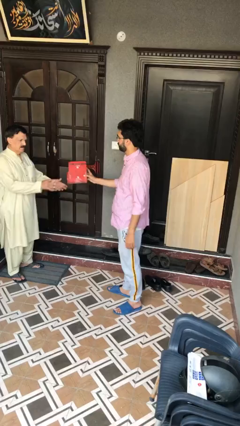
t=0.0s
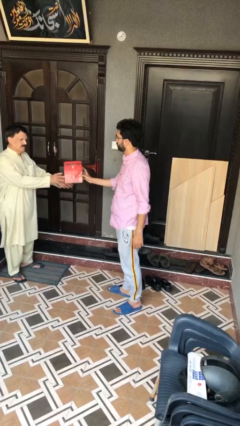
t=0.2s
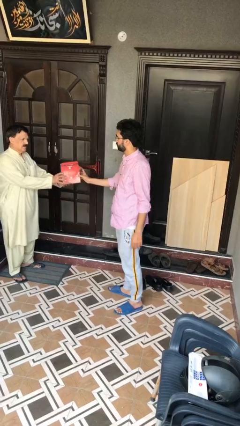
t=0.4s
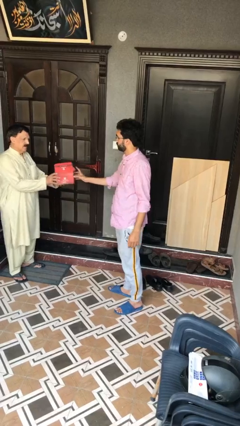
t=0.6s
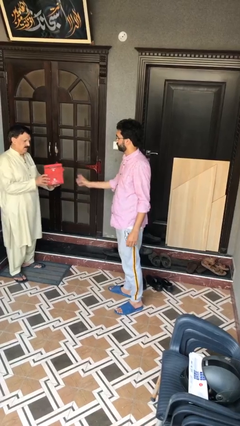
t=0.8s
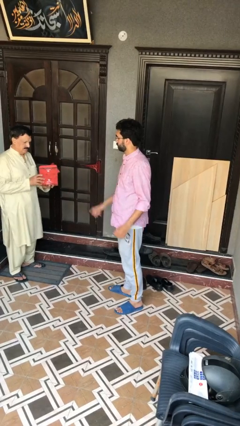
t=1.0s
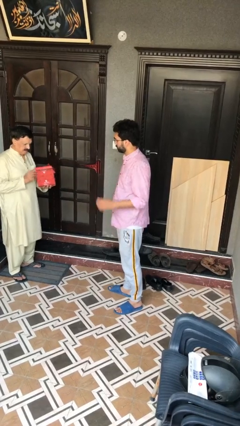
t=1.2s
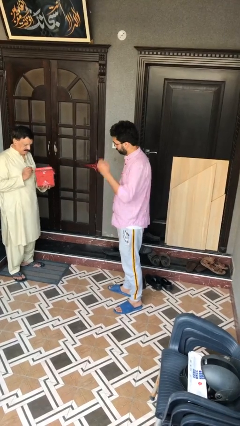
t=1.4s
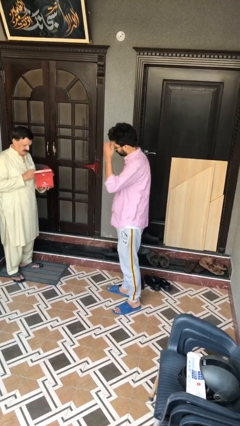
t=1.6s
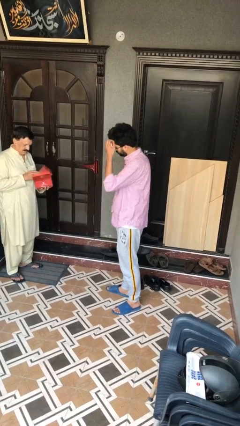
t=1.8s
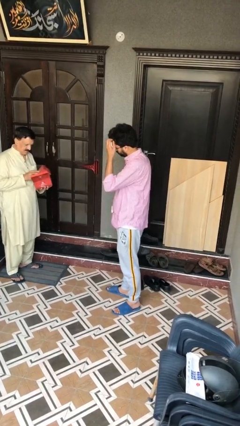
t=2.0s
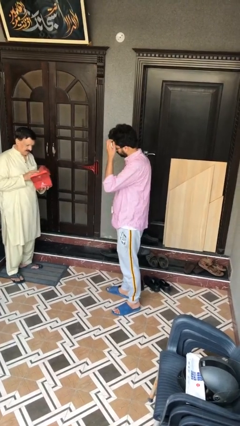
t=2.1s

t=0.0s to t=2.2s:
person transfers object to person

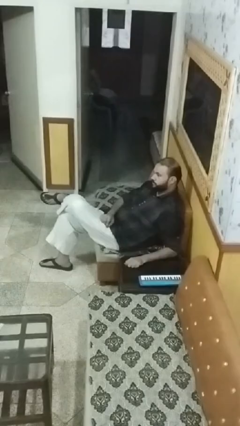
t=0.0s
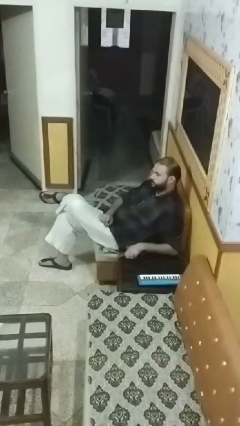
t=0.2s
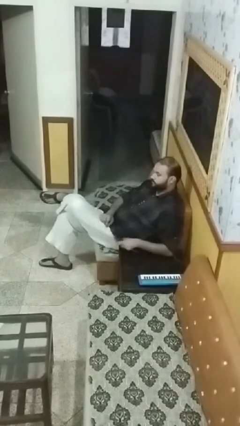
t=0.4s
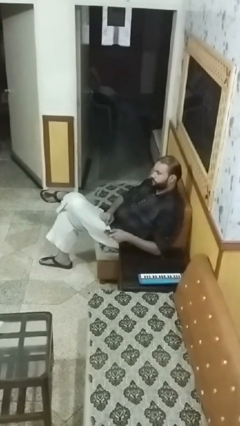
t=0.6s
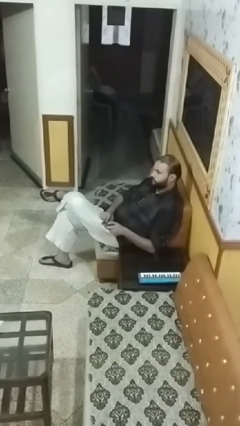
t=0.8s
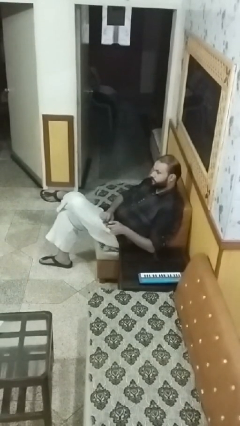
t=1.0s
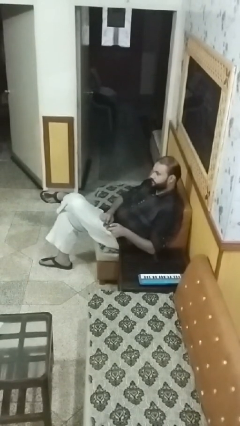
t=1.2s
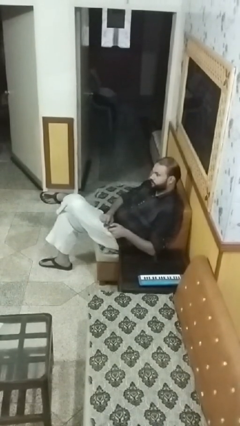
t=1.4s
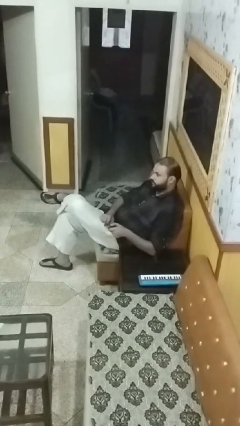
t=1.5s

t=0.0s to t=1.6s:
person uses television remote

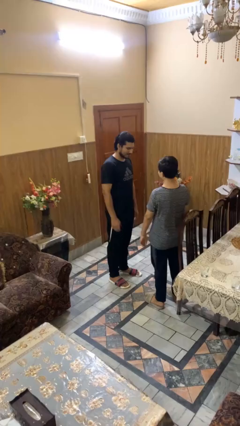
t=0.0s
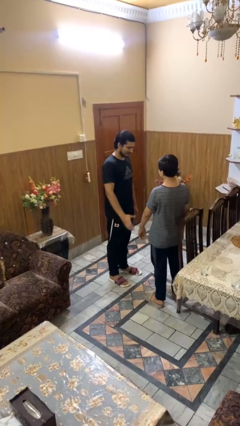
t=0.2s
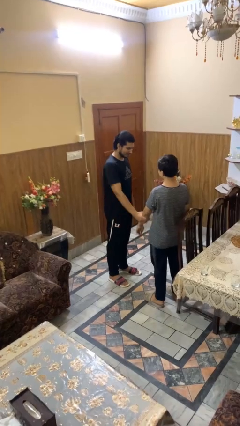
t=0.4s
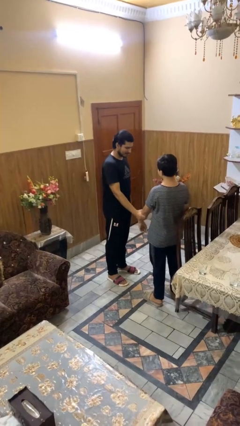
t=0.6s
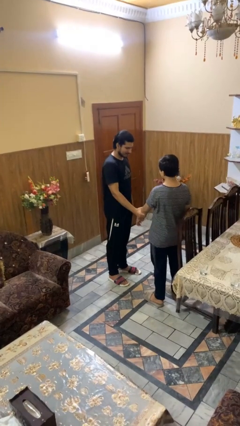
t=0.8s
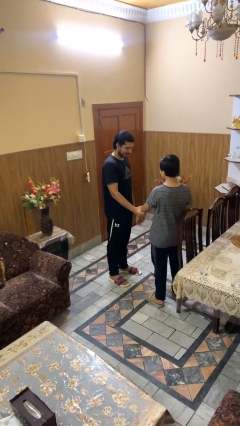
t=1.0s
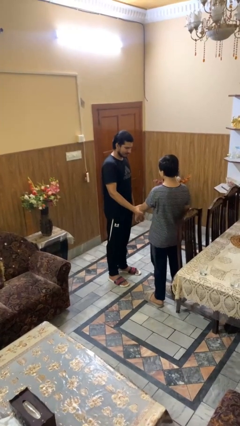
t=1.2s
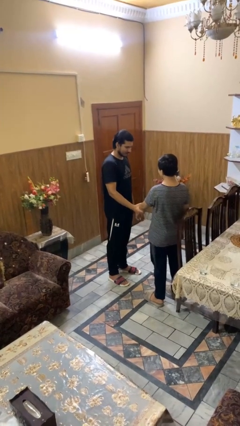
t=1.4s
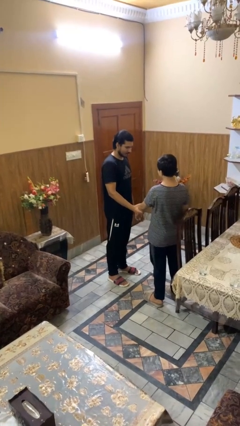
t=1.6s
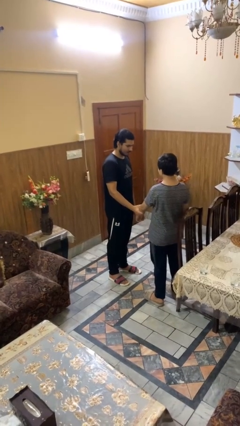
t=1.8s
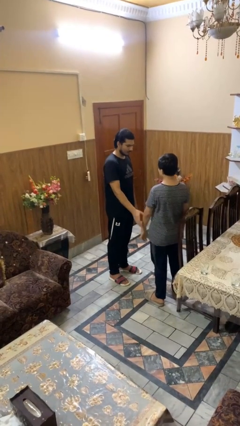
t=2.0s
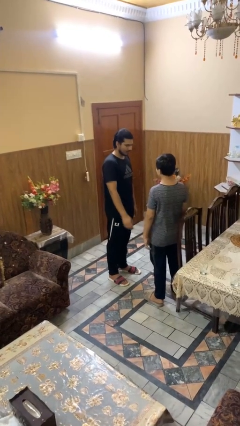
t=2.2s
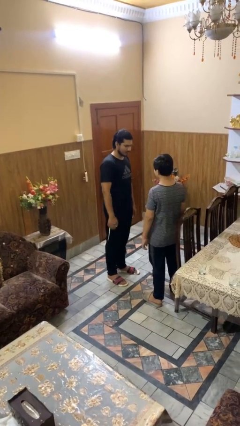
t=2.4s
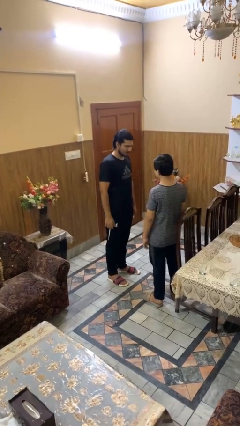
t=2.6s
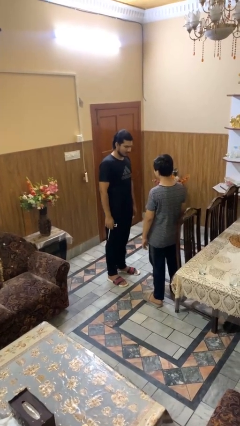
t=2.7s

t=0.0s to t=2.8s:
person grabs person by forearm

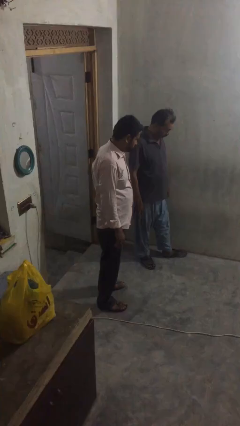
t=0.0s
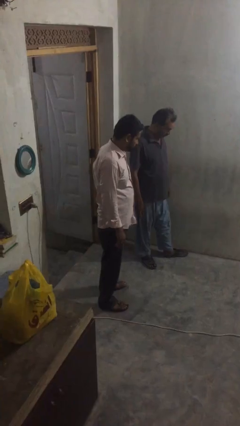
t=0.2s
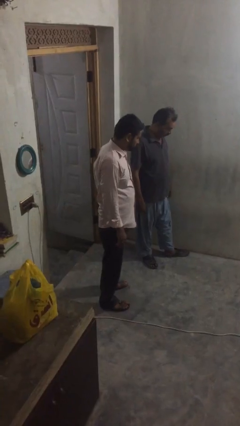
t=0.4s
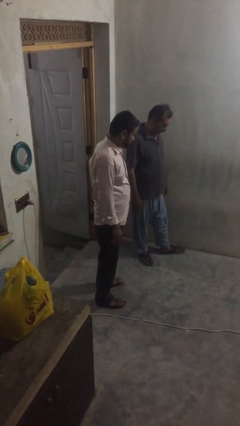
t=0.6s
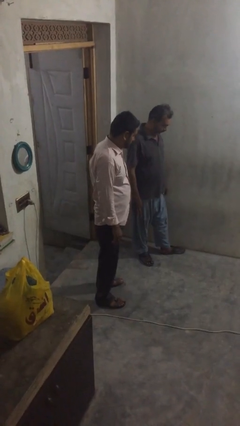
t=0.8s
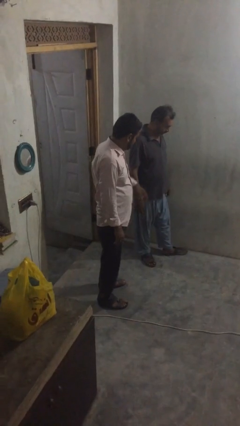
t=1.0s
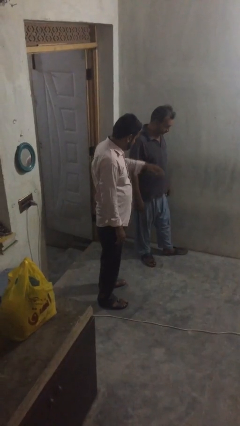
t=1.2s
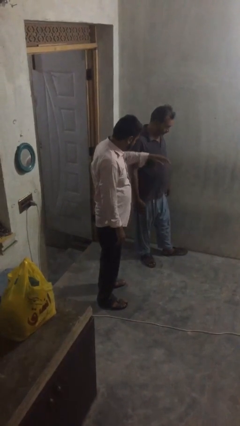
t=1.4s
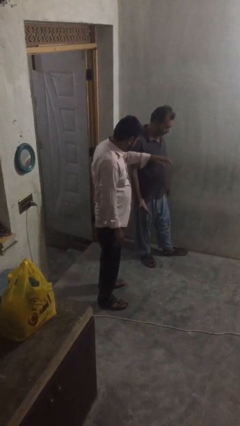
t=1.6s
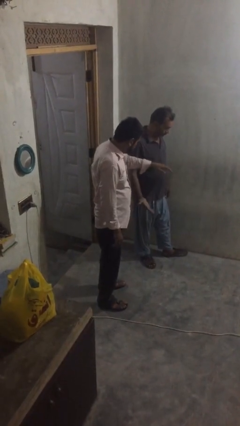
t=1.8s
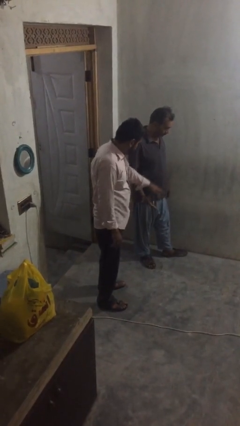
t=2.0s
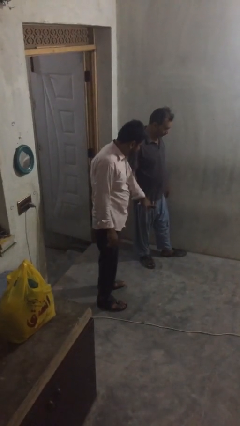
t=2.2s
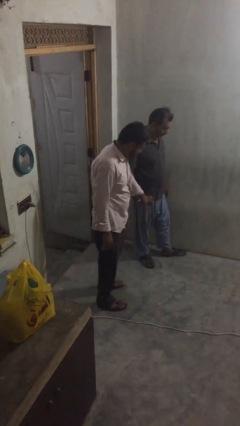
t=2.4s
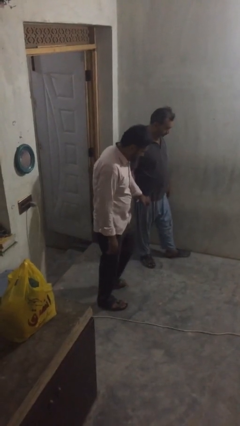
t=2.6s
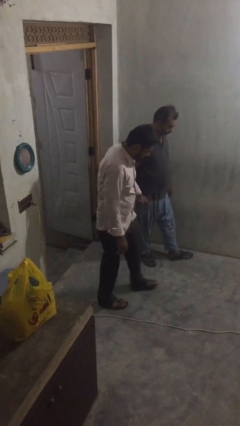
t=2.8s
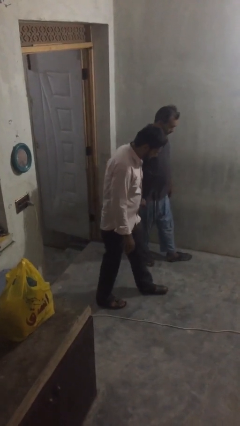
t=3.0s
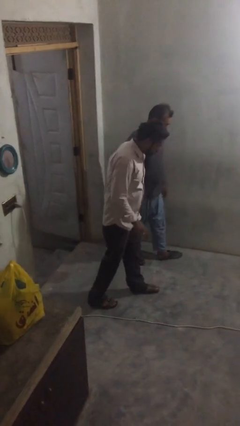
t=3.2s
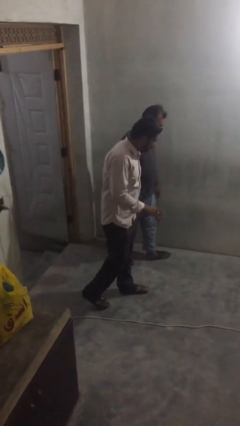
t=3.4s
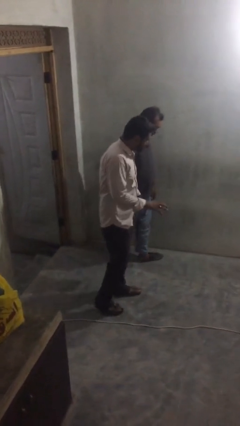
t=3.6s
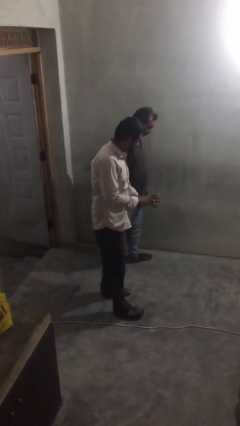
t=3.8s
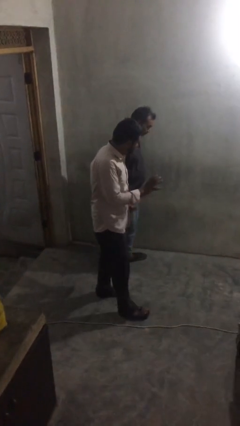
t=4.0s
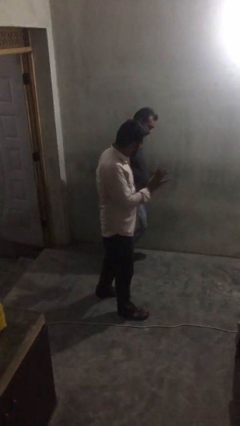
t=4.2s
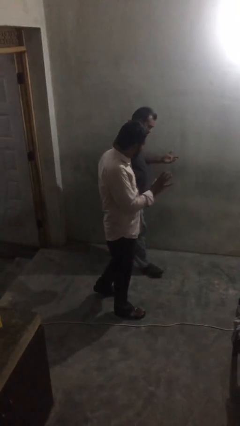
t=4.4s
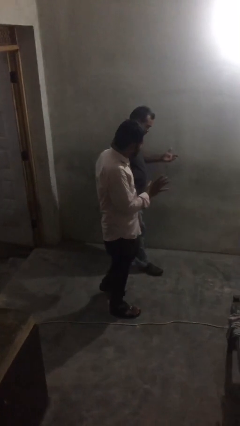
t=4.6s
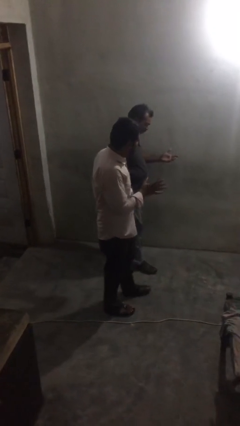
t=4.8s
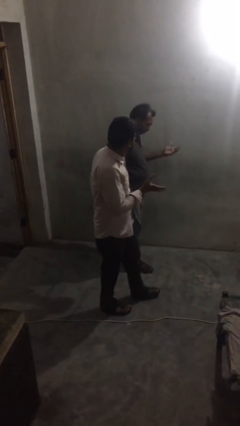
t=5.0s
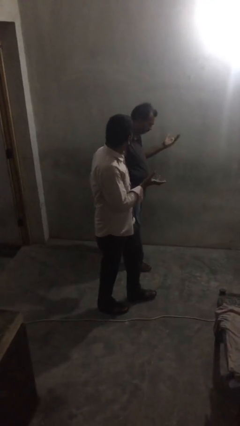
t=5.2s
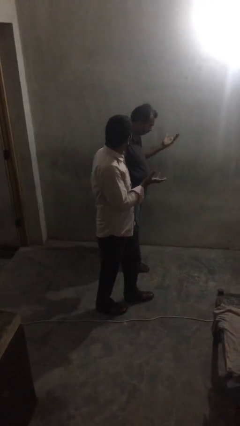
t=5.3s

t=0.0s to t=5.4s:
person holds hand

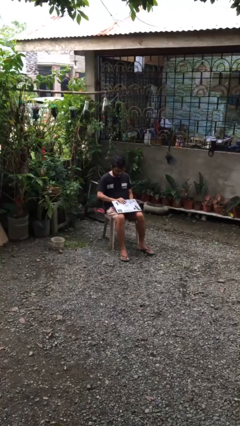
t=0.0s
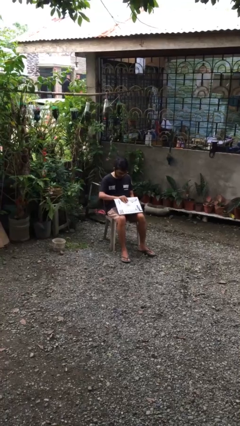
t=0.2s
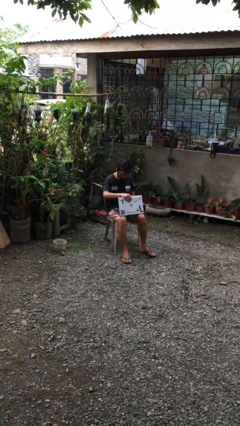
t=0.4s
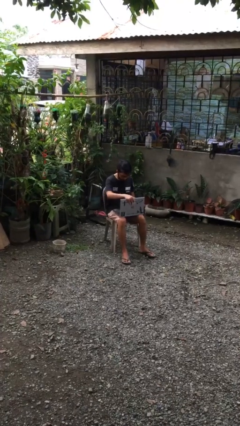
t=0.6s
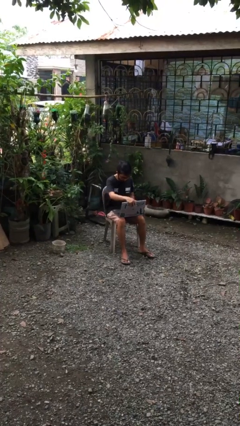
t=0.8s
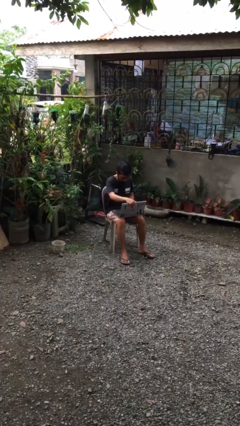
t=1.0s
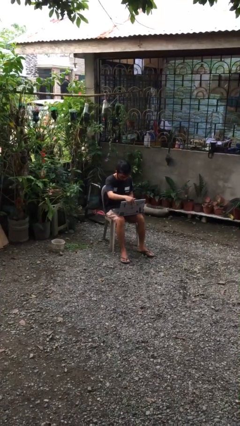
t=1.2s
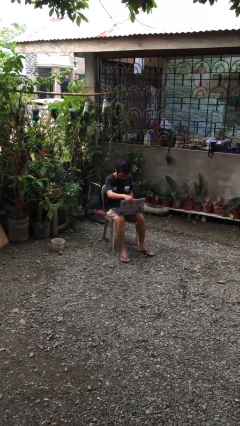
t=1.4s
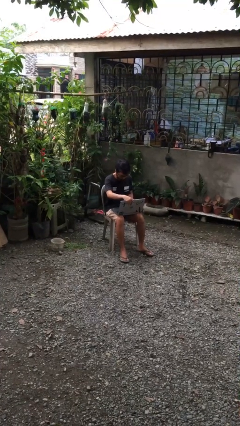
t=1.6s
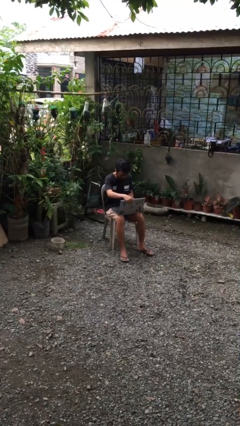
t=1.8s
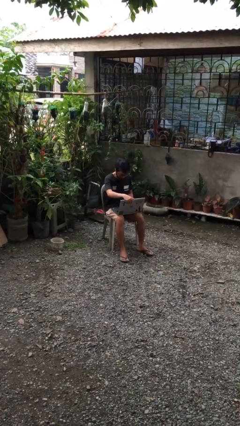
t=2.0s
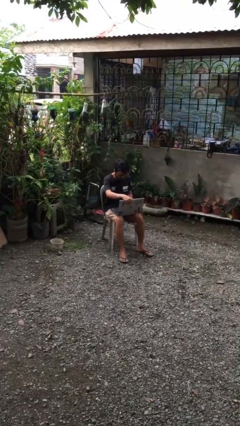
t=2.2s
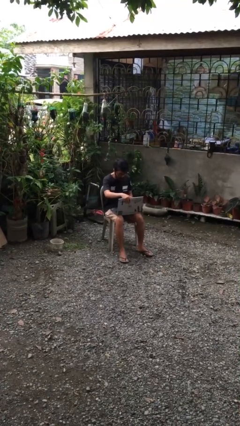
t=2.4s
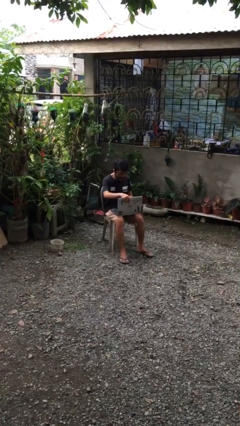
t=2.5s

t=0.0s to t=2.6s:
person interacts with laptop

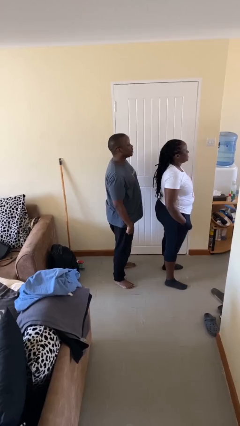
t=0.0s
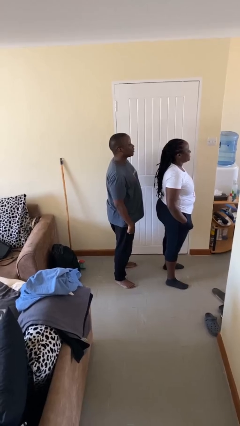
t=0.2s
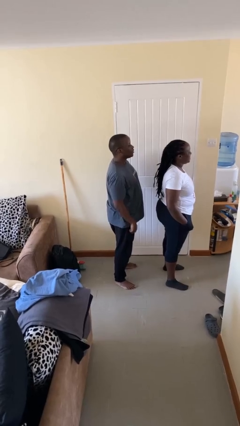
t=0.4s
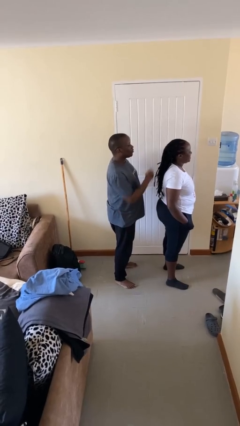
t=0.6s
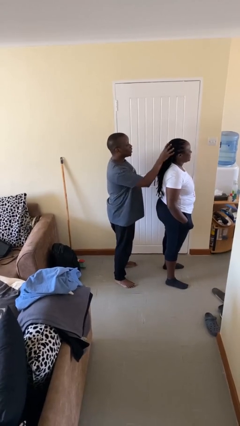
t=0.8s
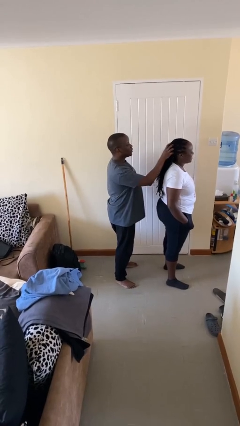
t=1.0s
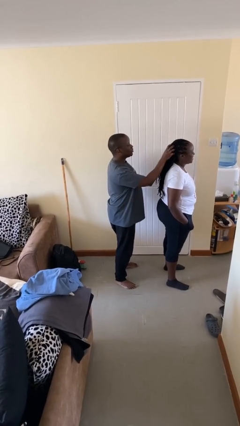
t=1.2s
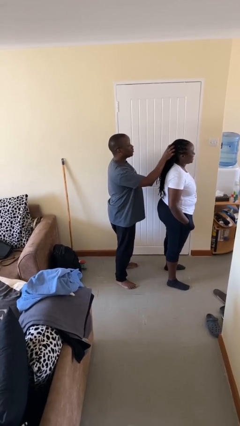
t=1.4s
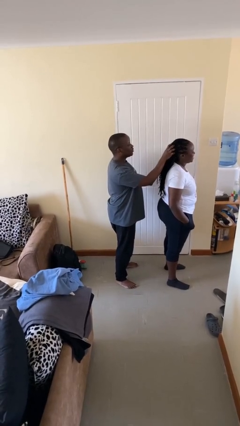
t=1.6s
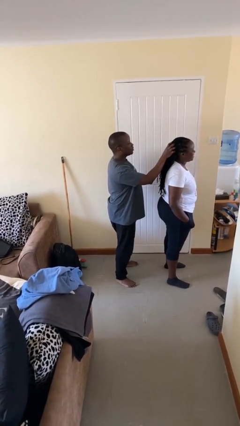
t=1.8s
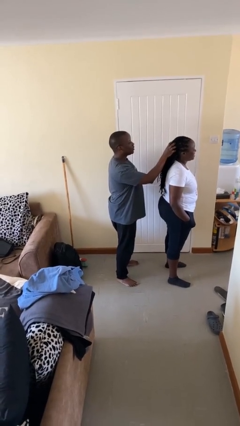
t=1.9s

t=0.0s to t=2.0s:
person grabs person by hair

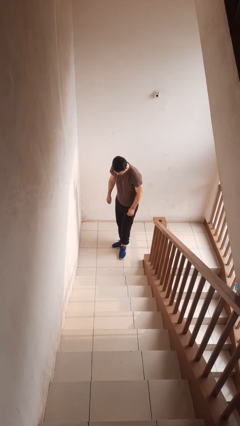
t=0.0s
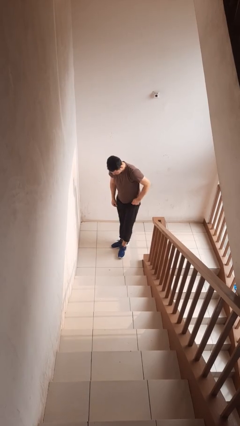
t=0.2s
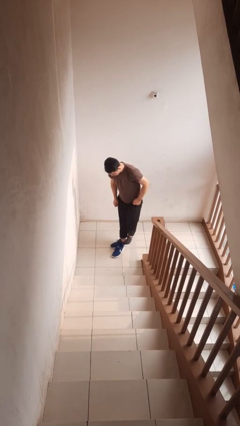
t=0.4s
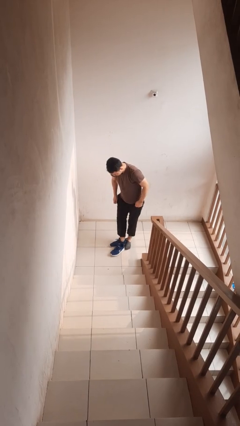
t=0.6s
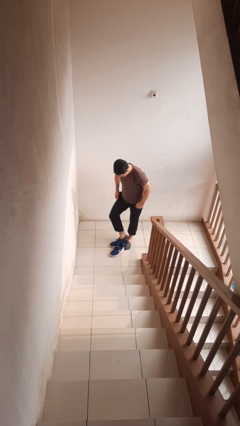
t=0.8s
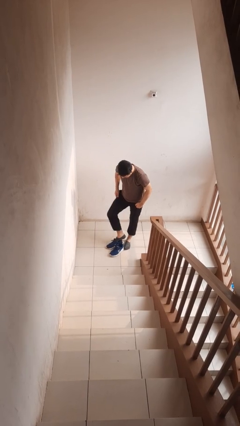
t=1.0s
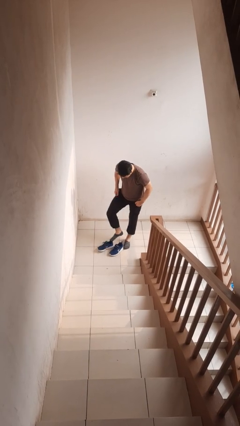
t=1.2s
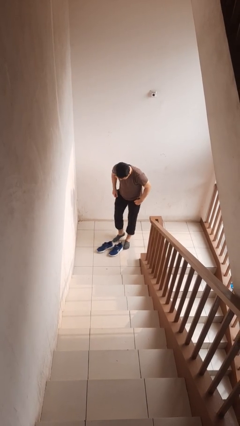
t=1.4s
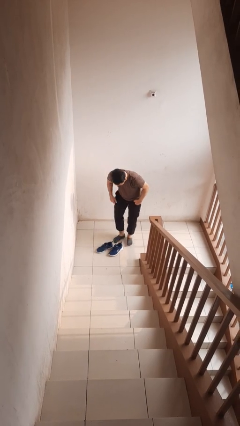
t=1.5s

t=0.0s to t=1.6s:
person takes off shoes
